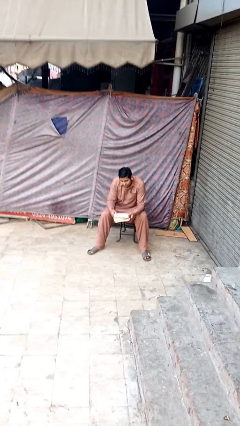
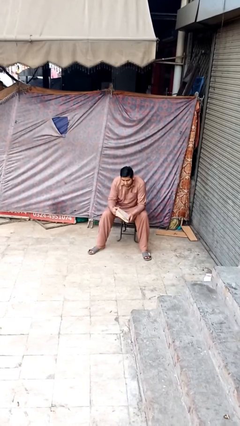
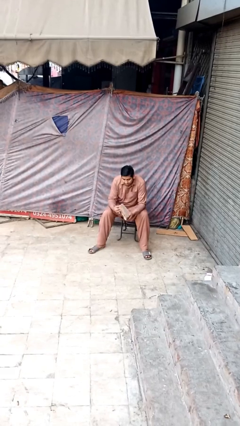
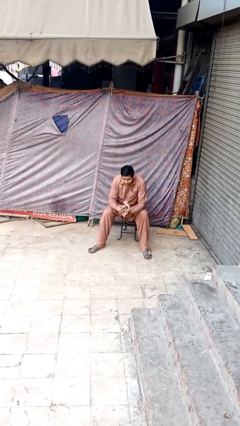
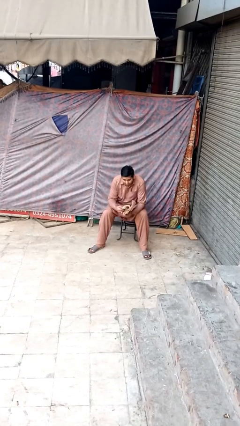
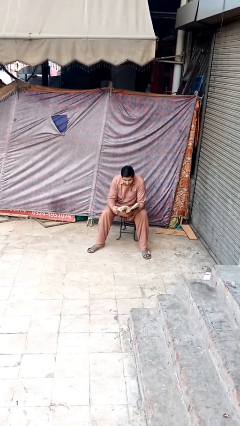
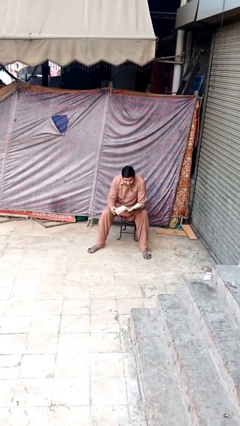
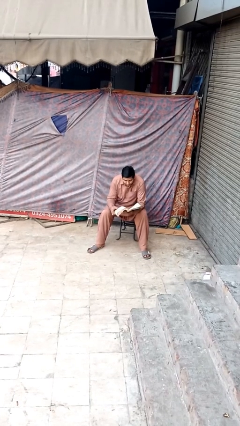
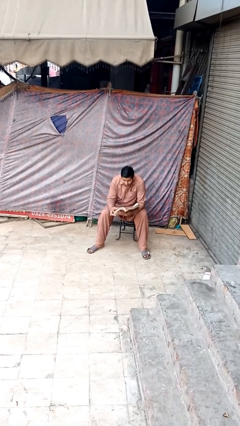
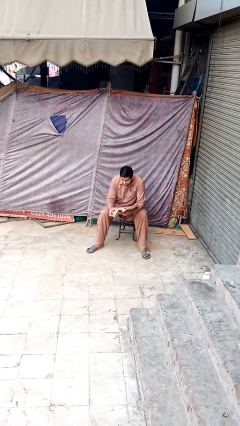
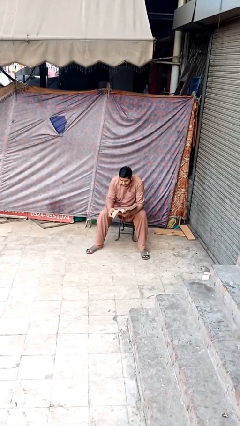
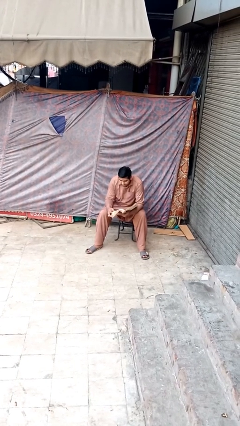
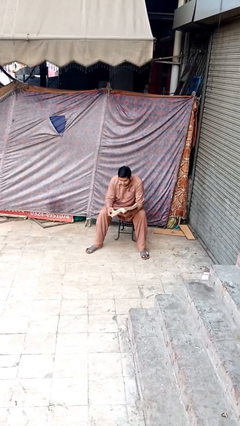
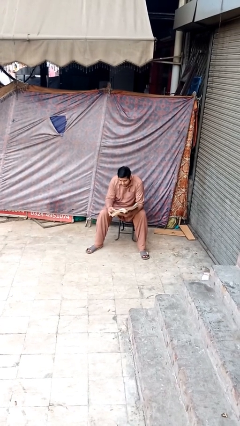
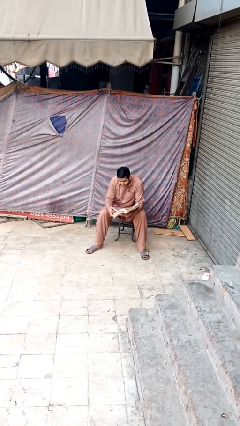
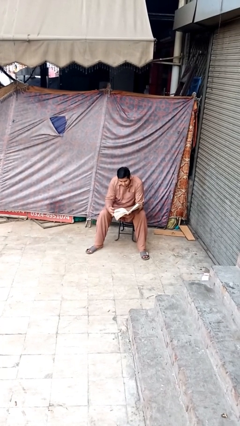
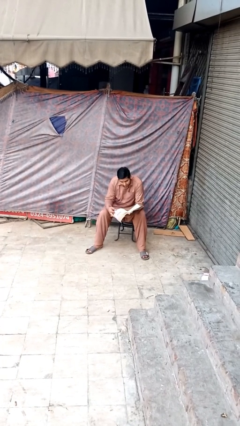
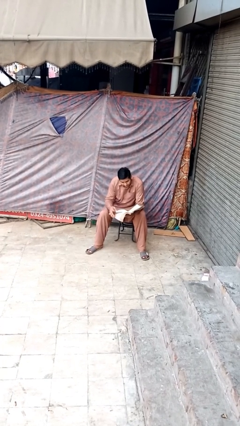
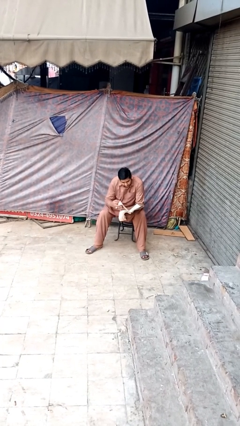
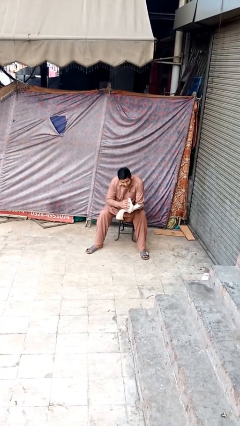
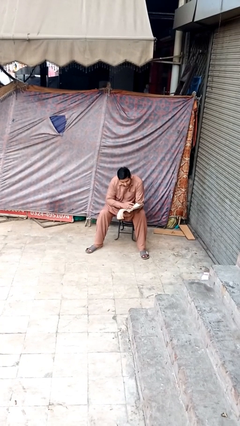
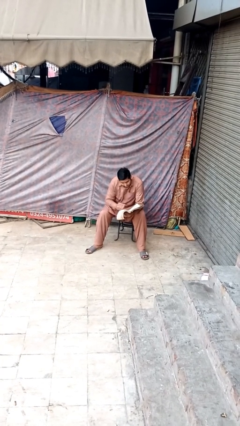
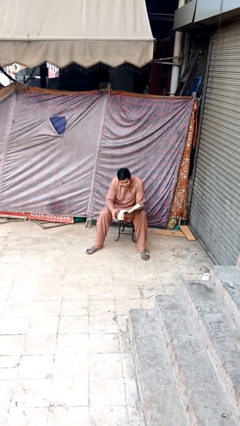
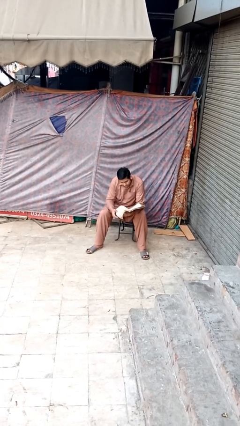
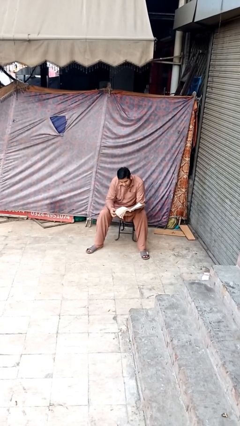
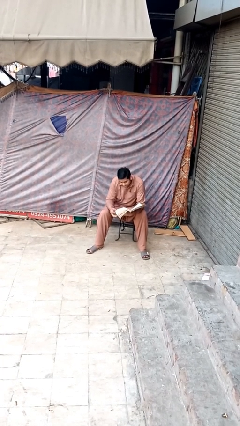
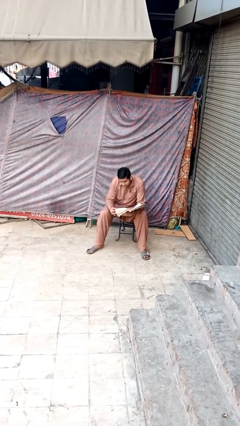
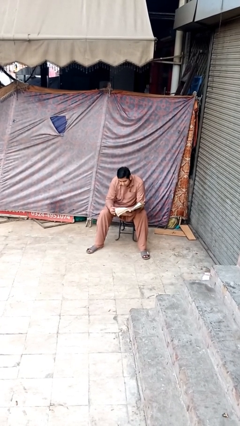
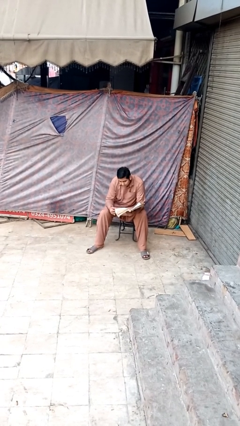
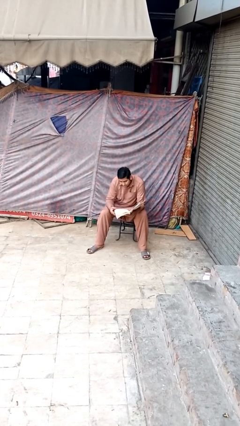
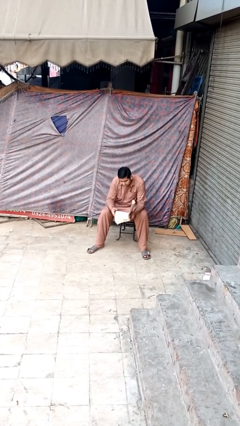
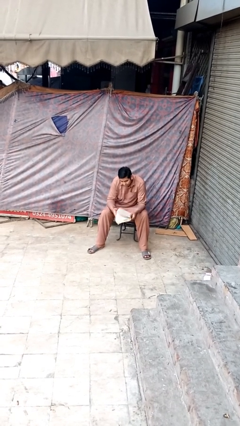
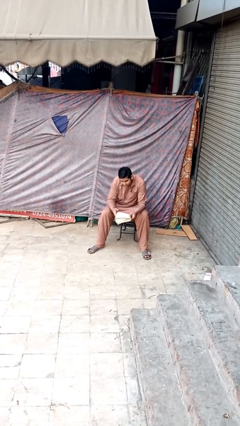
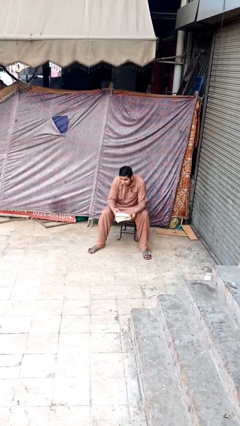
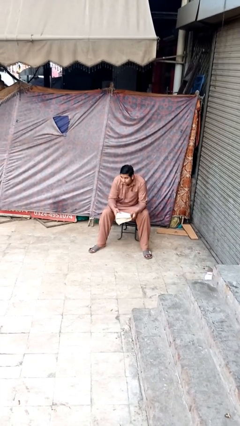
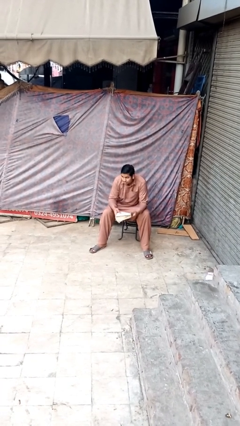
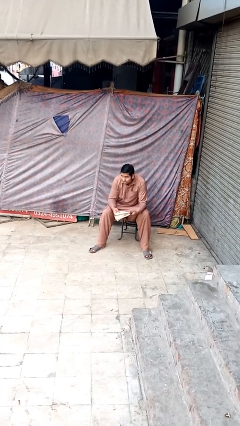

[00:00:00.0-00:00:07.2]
person reads document

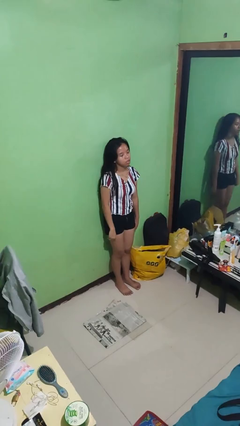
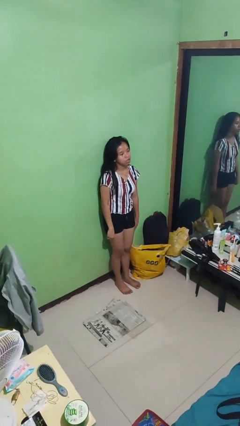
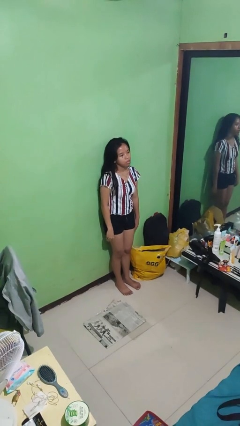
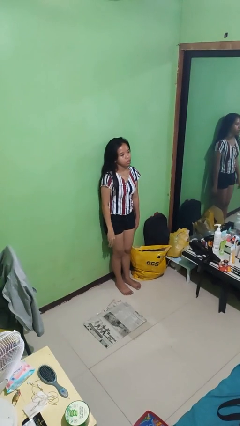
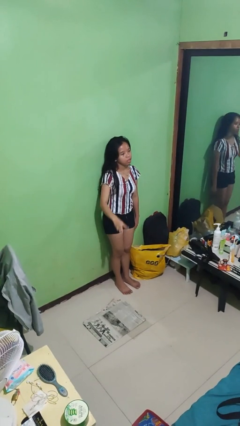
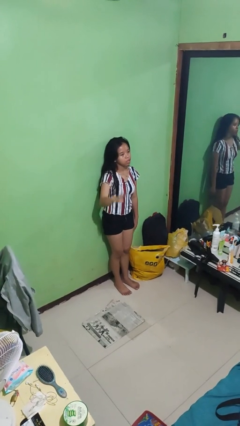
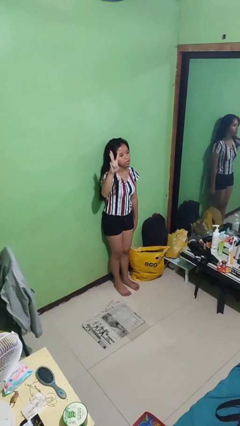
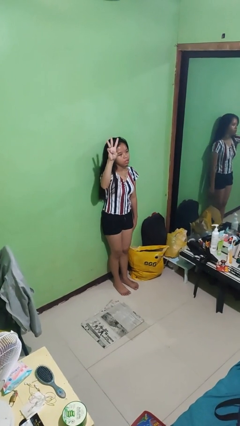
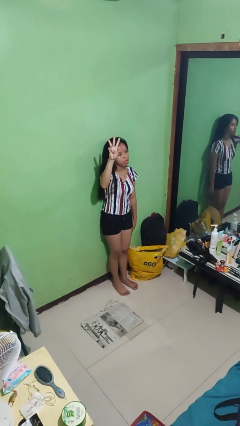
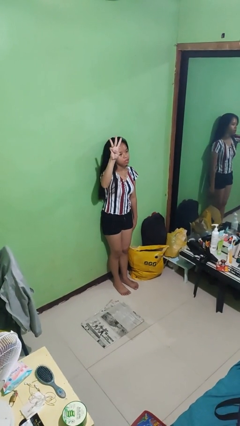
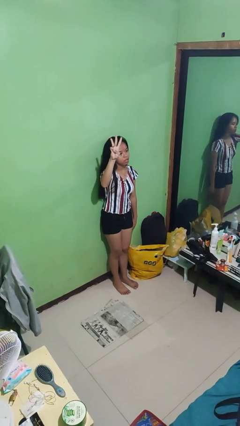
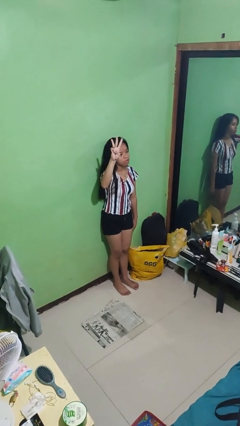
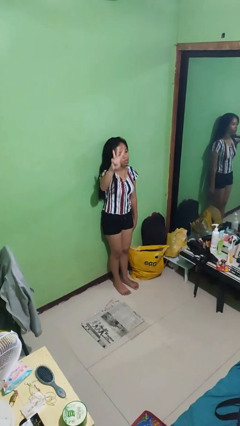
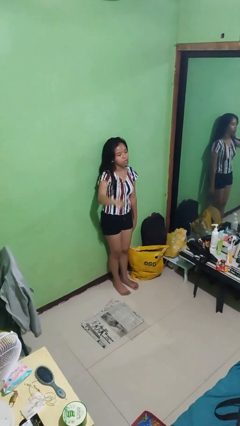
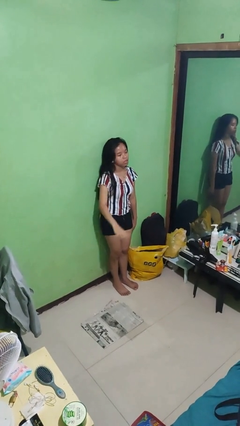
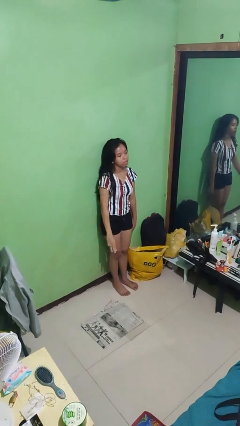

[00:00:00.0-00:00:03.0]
person gestures number three

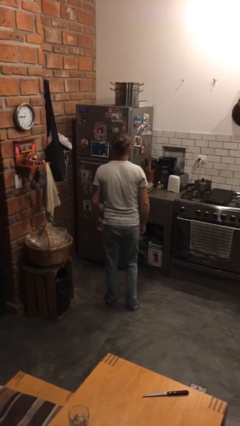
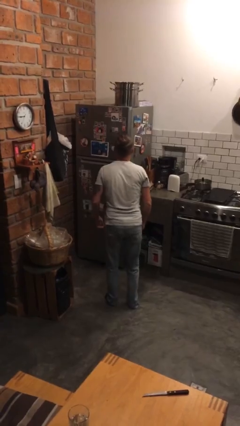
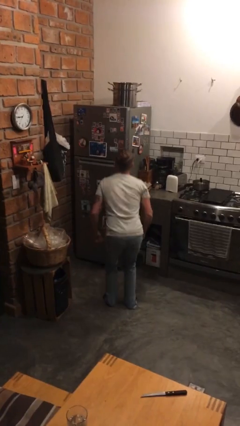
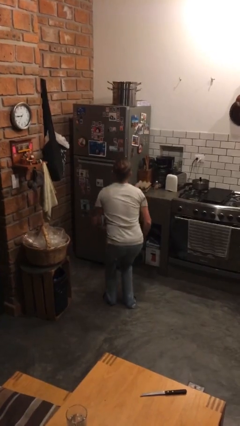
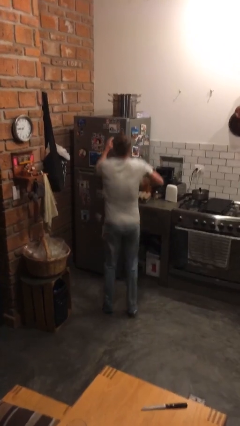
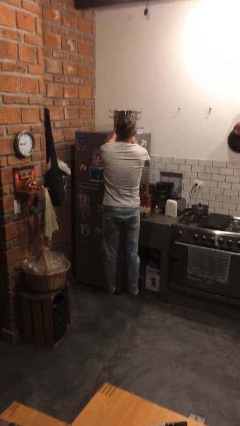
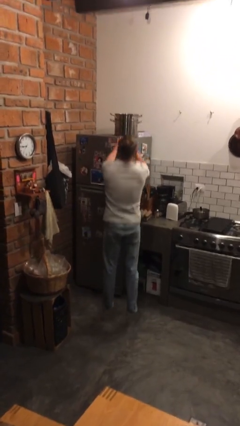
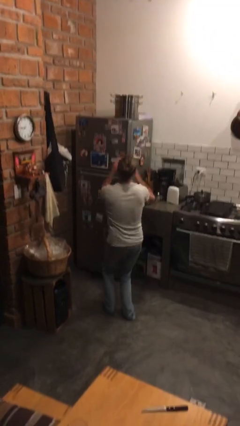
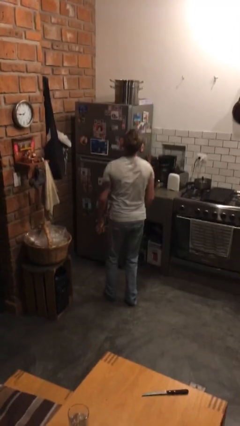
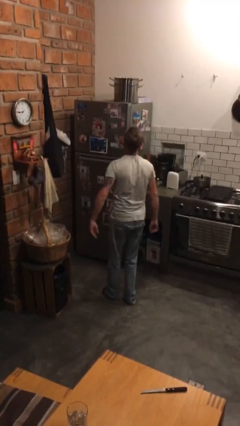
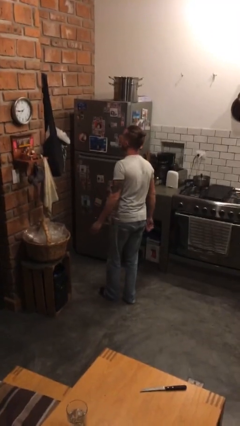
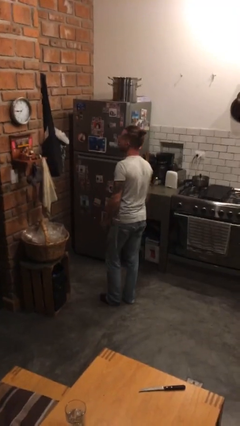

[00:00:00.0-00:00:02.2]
person jumps

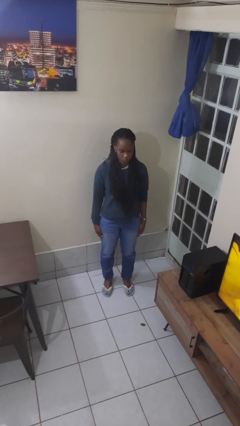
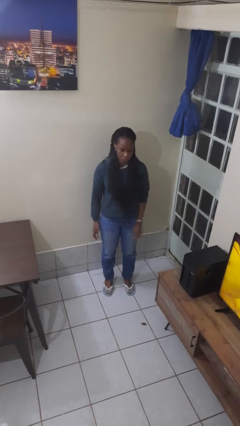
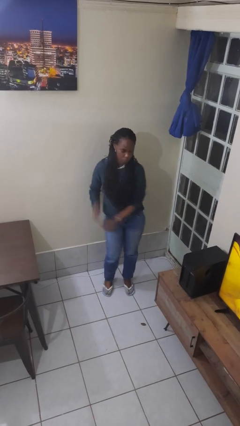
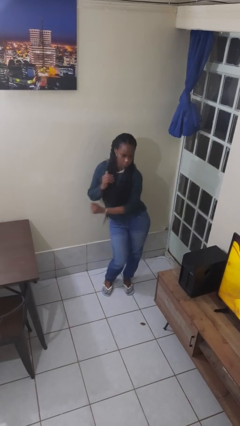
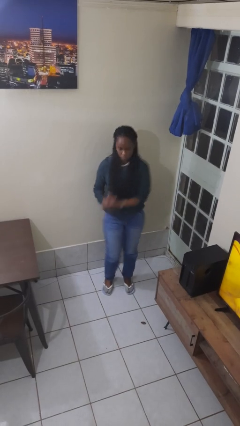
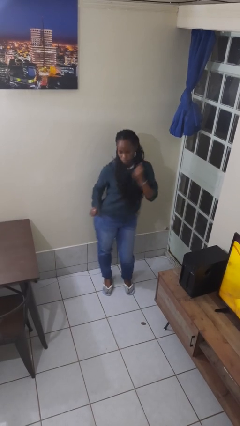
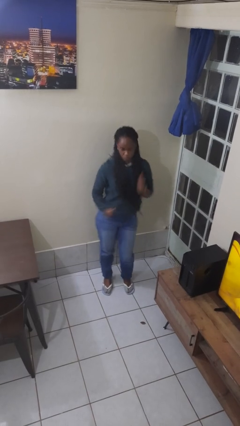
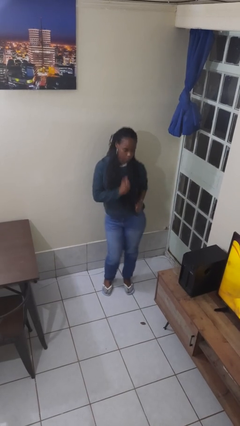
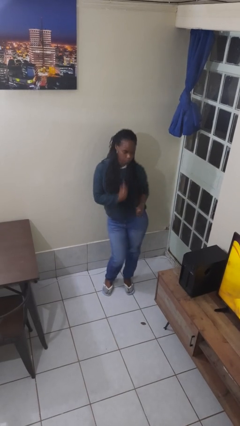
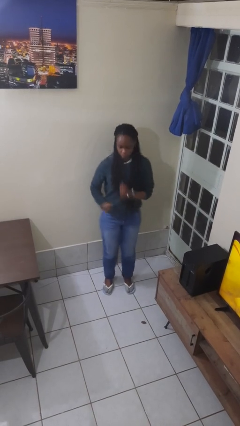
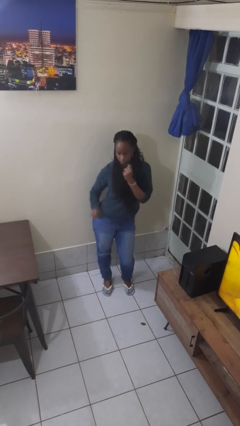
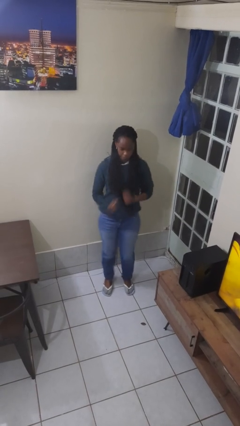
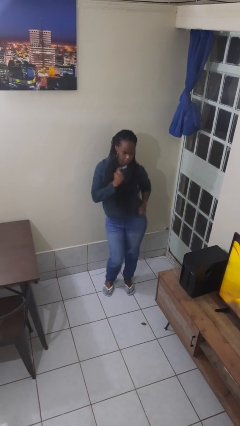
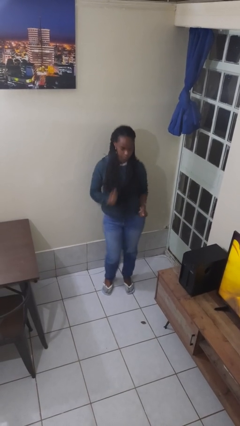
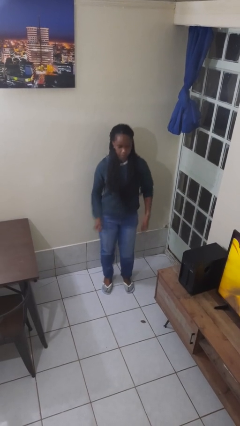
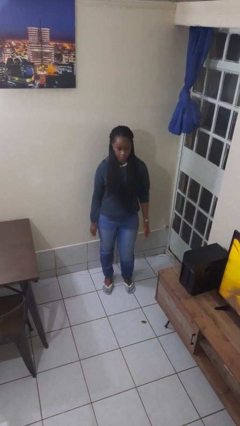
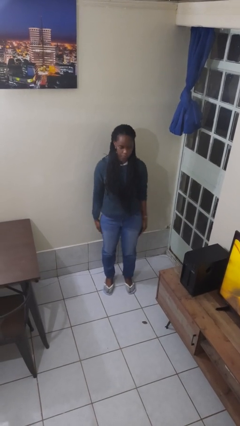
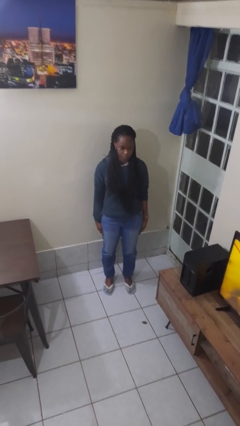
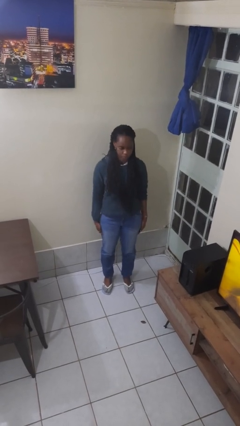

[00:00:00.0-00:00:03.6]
person wiggles hips

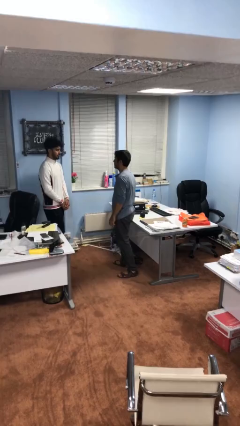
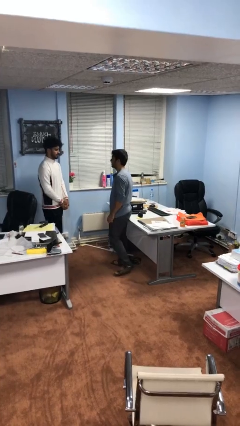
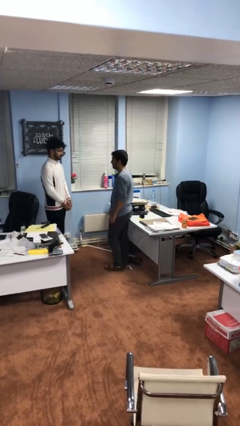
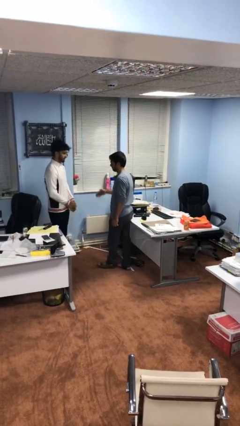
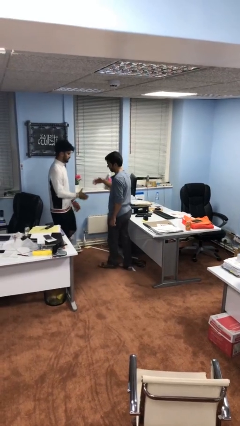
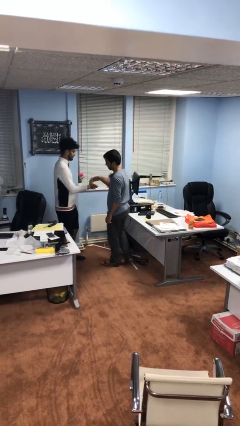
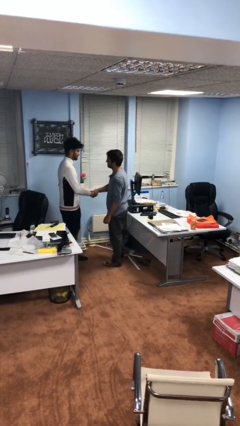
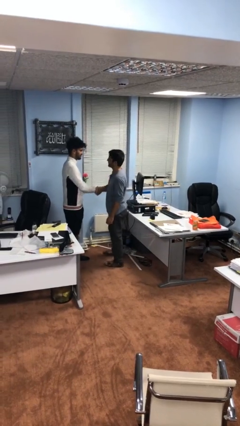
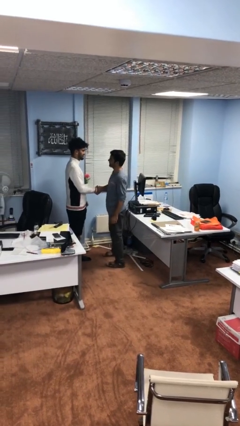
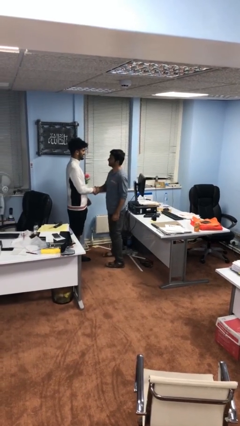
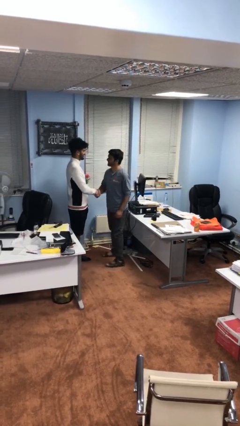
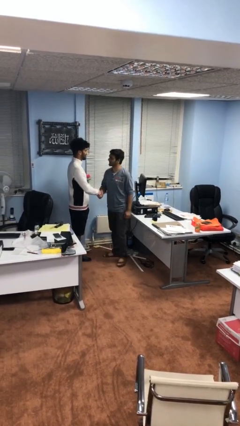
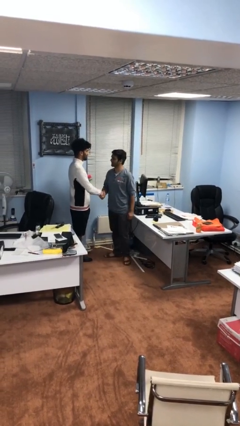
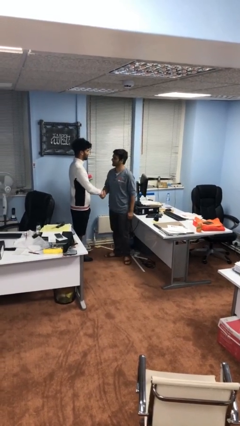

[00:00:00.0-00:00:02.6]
person shakes hand
